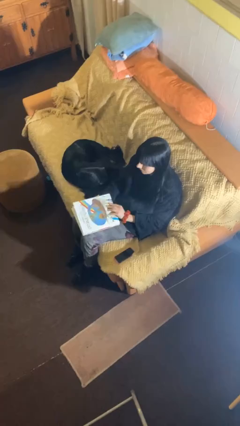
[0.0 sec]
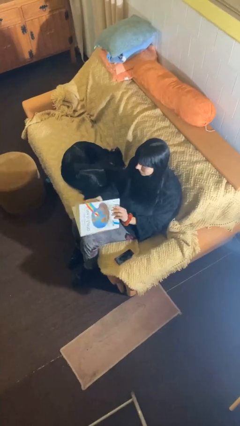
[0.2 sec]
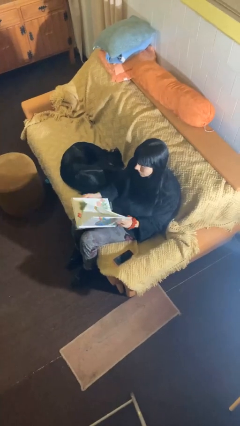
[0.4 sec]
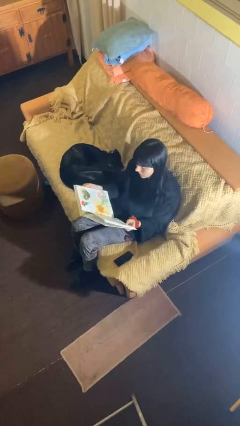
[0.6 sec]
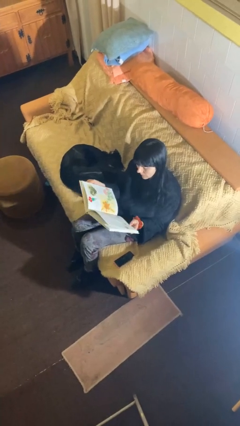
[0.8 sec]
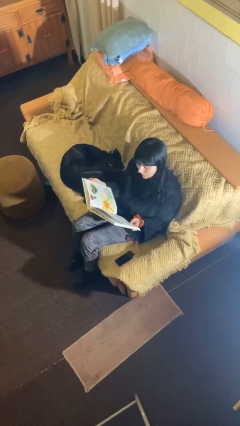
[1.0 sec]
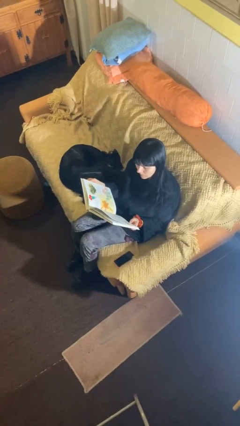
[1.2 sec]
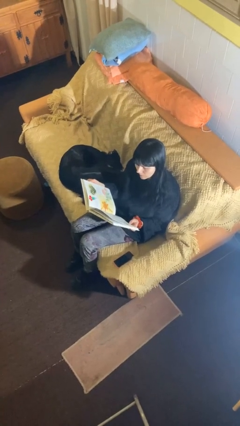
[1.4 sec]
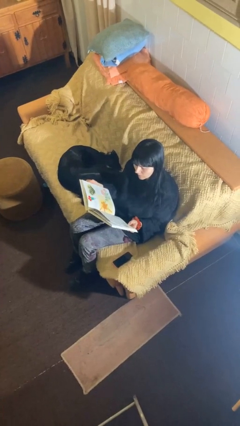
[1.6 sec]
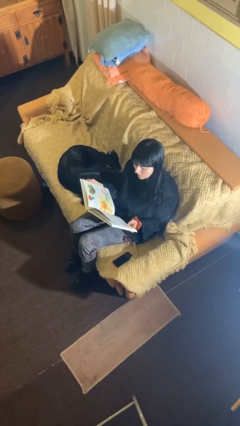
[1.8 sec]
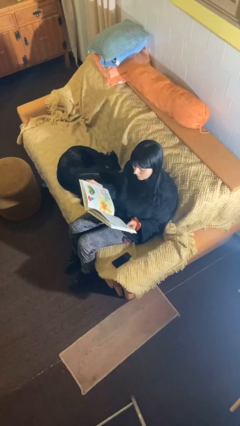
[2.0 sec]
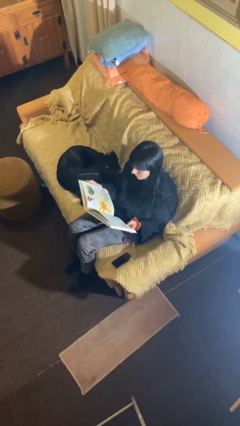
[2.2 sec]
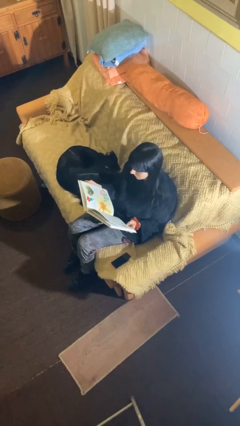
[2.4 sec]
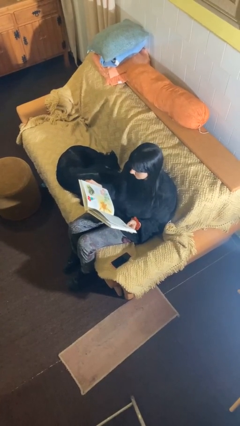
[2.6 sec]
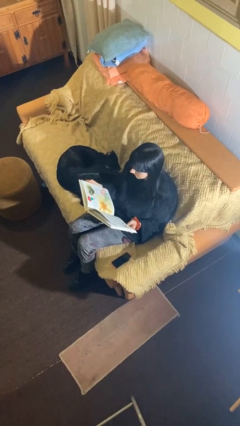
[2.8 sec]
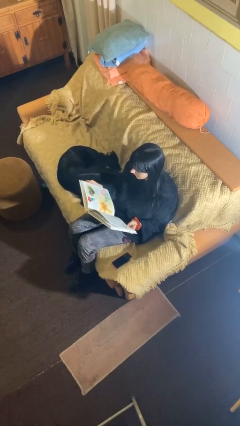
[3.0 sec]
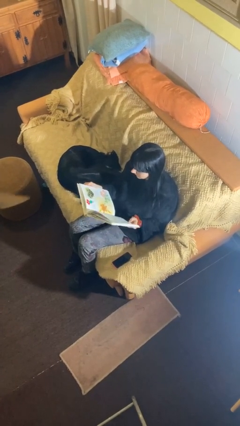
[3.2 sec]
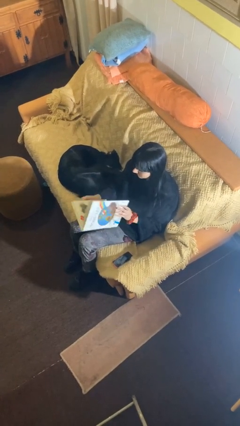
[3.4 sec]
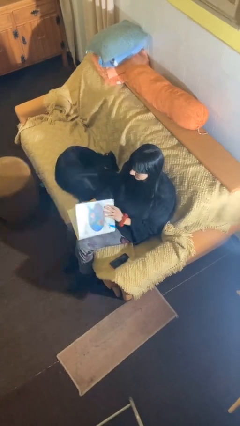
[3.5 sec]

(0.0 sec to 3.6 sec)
person reads document

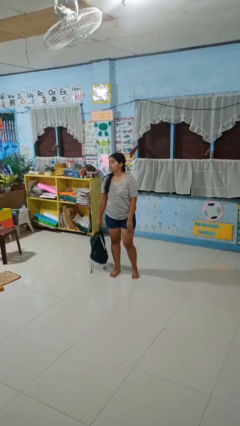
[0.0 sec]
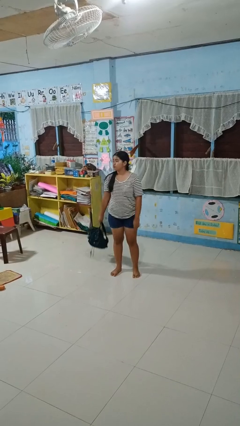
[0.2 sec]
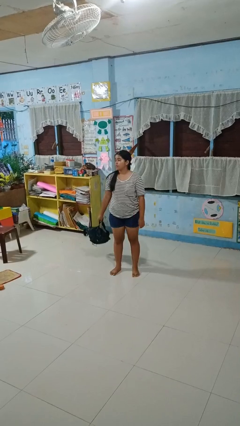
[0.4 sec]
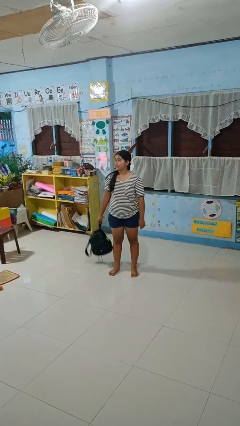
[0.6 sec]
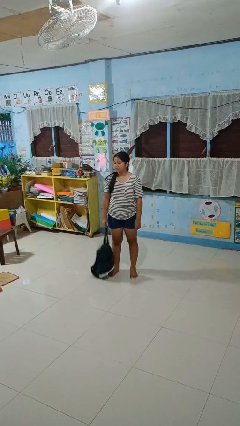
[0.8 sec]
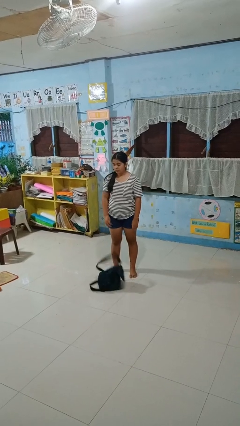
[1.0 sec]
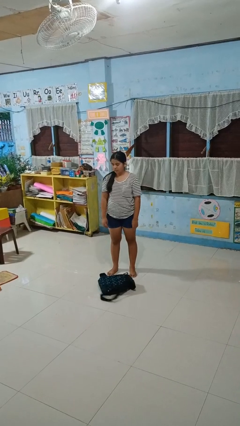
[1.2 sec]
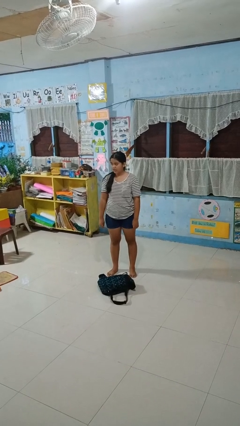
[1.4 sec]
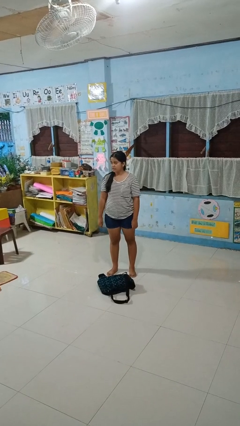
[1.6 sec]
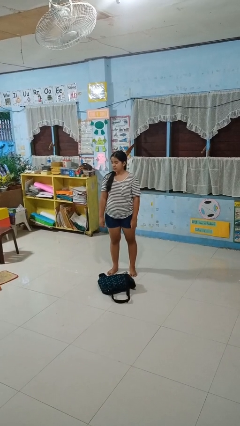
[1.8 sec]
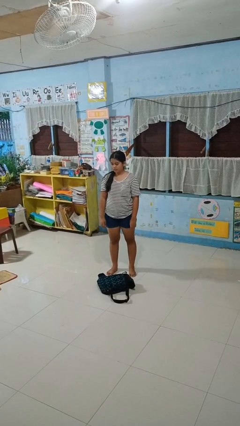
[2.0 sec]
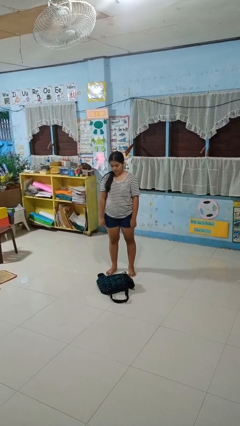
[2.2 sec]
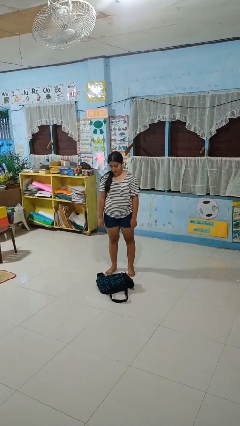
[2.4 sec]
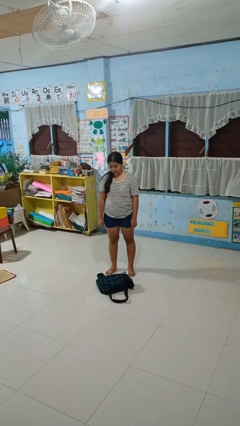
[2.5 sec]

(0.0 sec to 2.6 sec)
person drops object

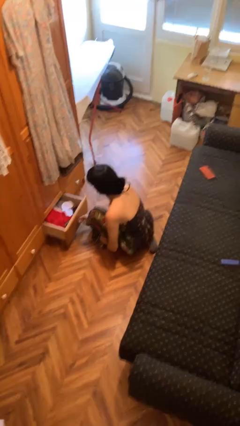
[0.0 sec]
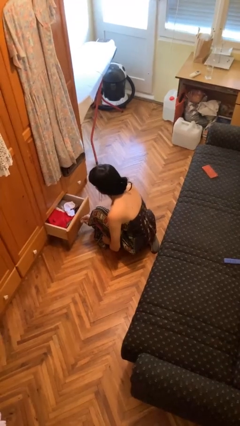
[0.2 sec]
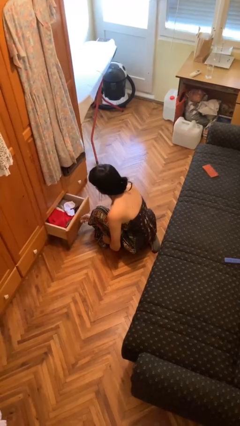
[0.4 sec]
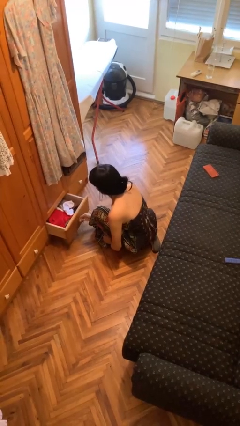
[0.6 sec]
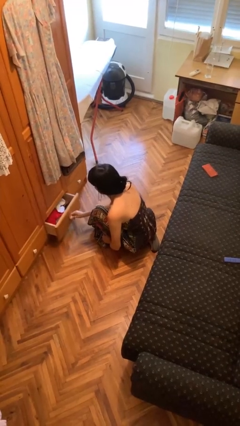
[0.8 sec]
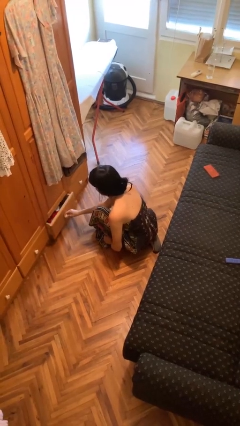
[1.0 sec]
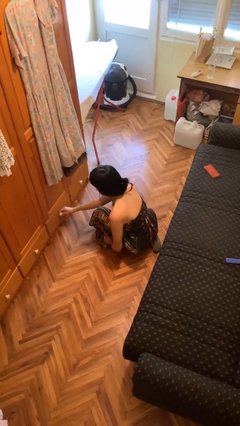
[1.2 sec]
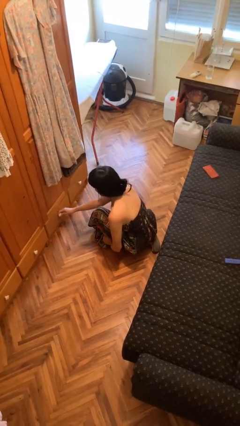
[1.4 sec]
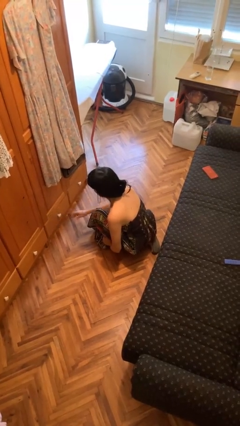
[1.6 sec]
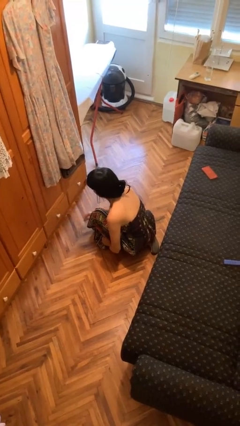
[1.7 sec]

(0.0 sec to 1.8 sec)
person closes dresser drawer

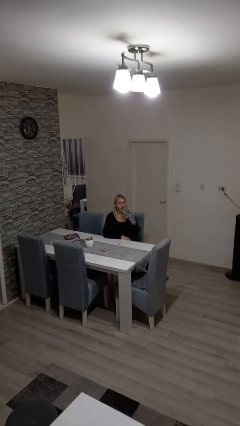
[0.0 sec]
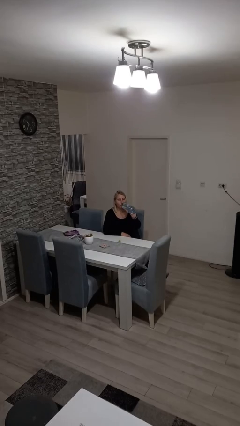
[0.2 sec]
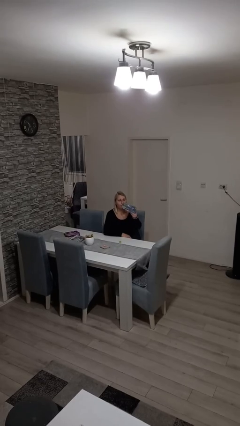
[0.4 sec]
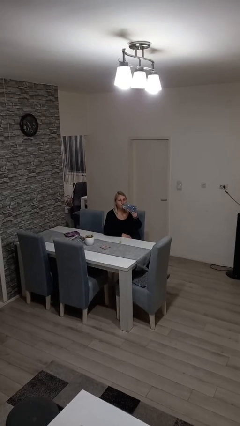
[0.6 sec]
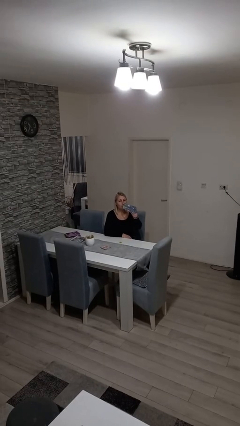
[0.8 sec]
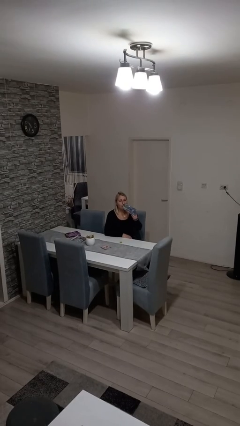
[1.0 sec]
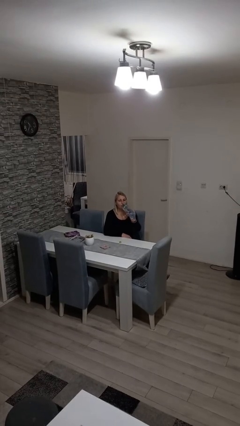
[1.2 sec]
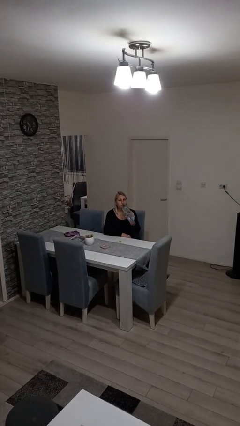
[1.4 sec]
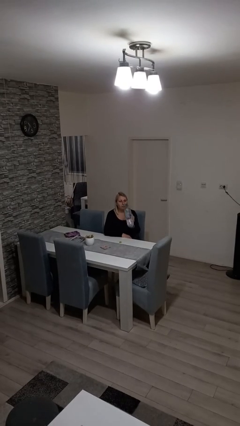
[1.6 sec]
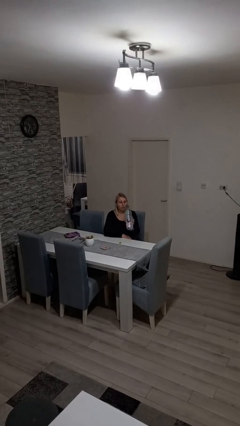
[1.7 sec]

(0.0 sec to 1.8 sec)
person drinks from bottle

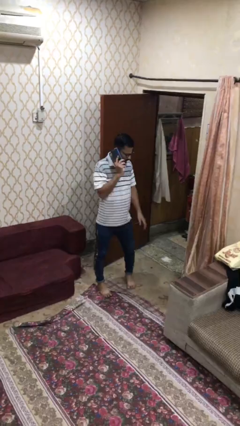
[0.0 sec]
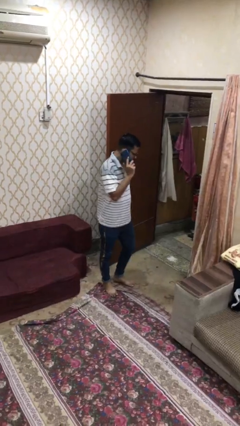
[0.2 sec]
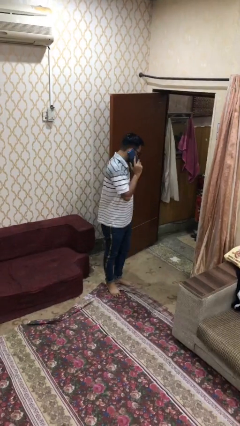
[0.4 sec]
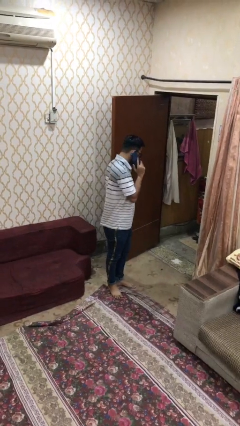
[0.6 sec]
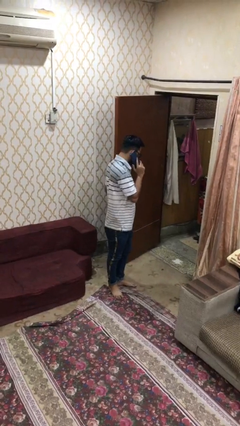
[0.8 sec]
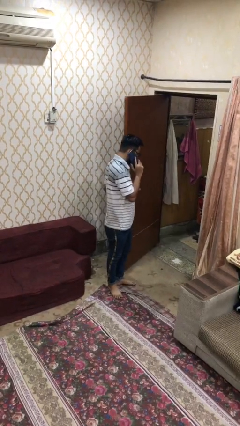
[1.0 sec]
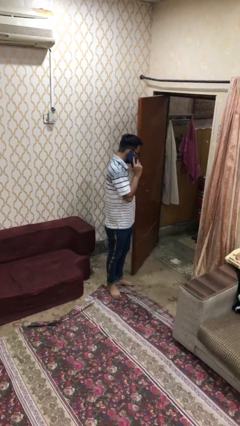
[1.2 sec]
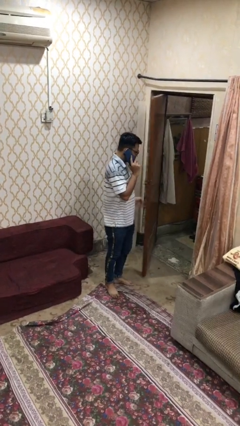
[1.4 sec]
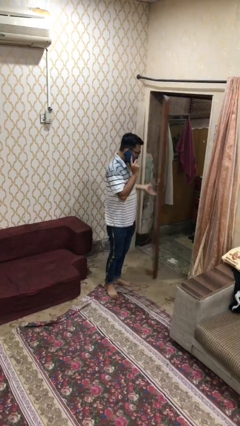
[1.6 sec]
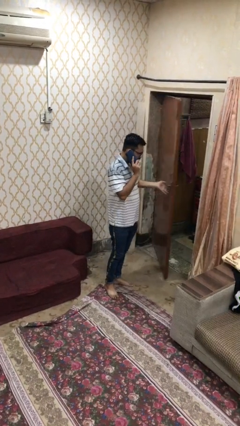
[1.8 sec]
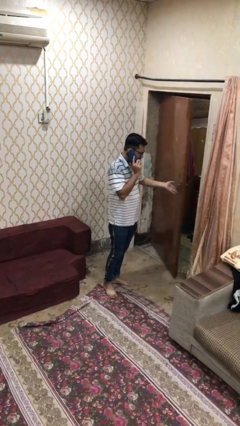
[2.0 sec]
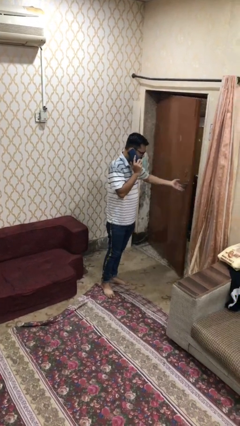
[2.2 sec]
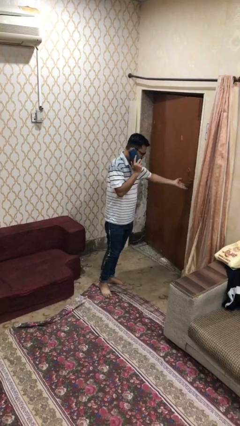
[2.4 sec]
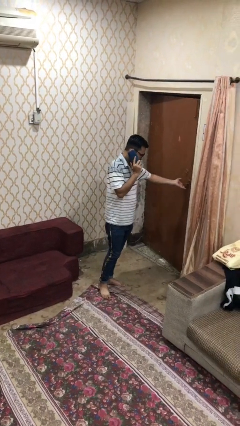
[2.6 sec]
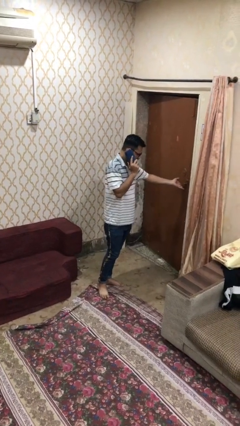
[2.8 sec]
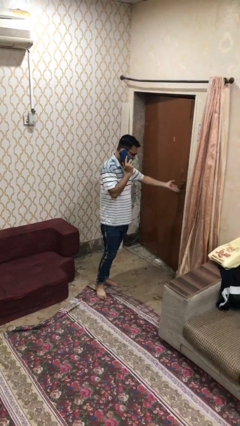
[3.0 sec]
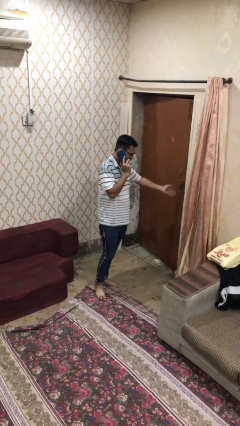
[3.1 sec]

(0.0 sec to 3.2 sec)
person closes facility door

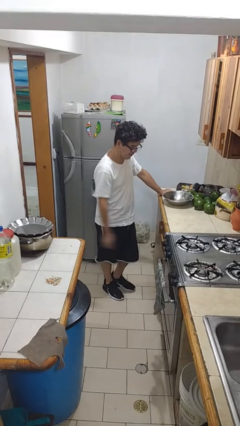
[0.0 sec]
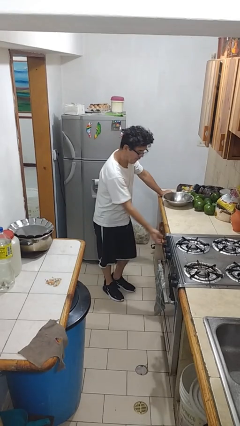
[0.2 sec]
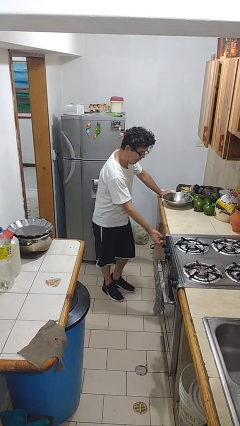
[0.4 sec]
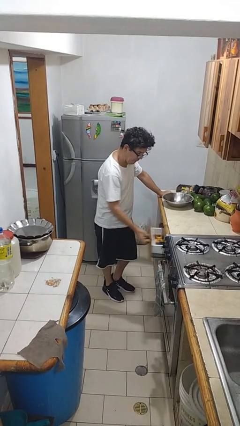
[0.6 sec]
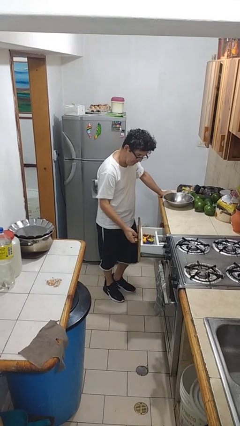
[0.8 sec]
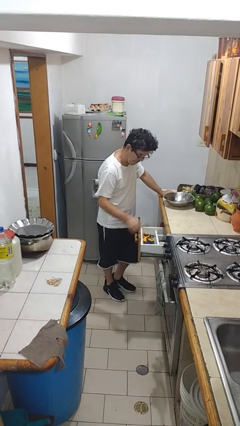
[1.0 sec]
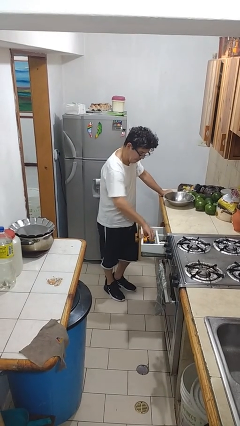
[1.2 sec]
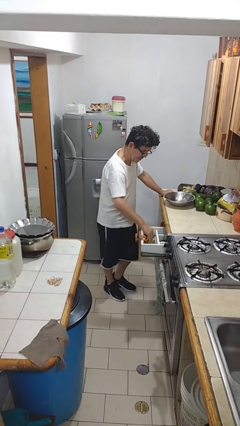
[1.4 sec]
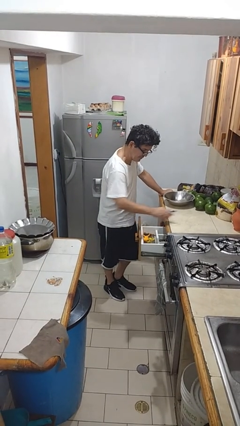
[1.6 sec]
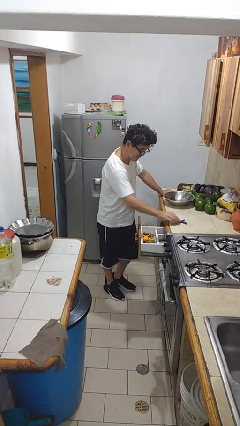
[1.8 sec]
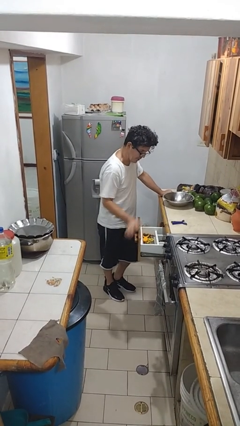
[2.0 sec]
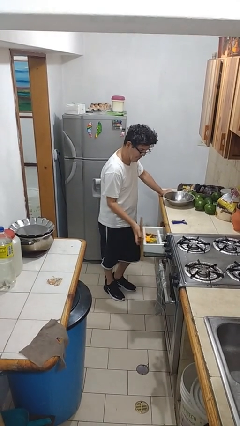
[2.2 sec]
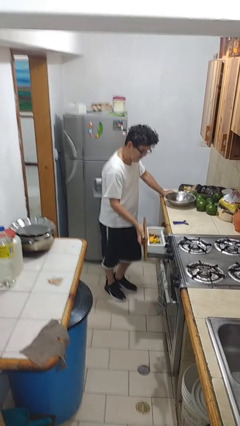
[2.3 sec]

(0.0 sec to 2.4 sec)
person takes object from kitchen drawer

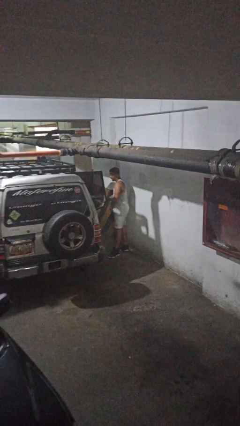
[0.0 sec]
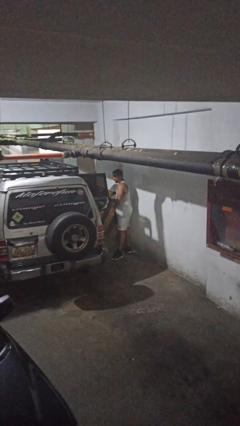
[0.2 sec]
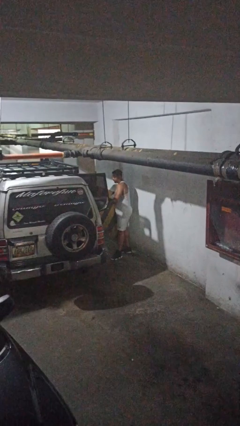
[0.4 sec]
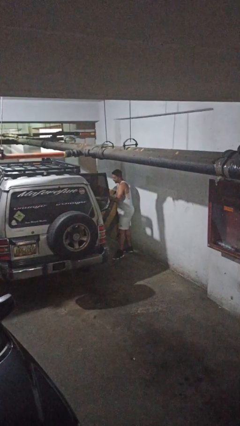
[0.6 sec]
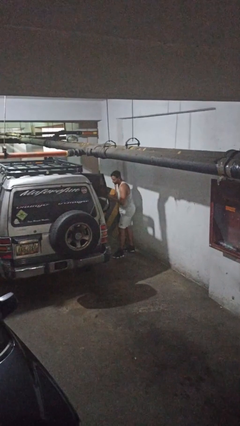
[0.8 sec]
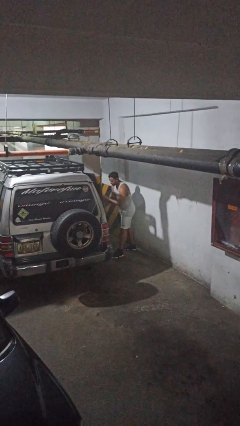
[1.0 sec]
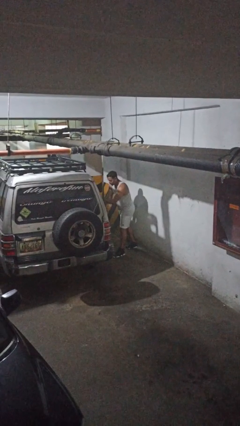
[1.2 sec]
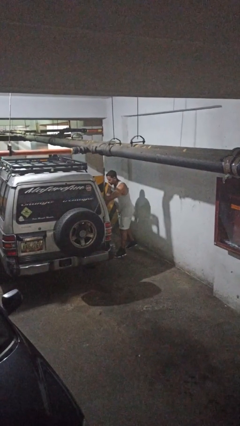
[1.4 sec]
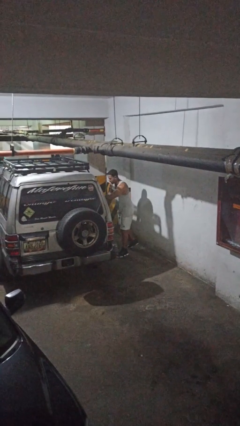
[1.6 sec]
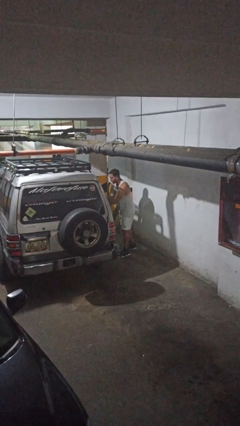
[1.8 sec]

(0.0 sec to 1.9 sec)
person closes car door
